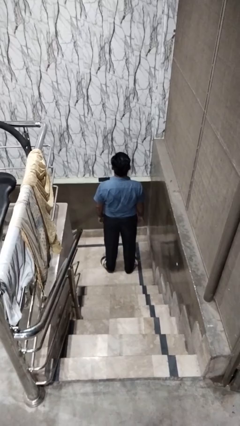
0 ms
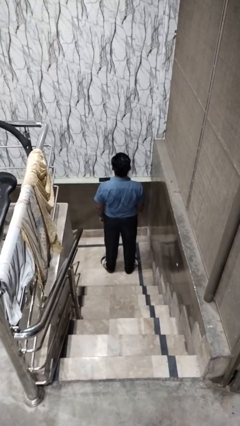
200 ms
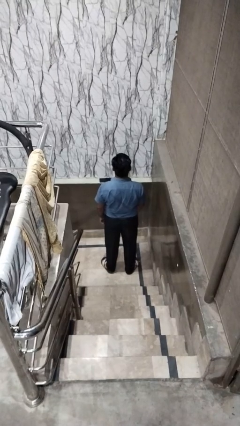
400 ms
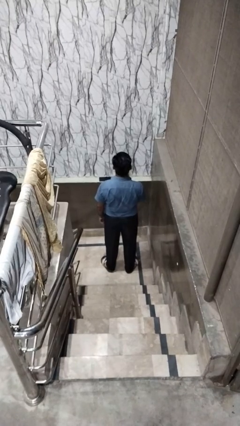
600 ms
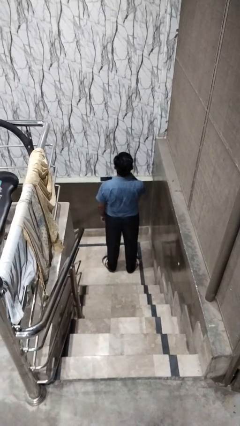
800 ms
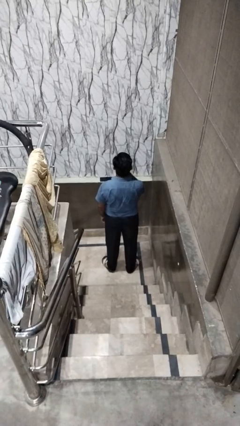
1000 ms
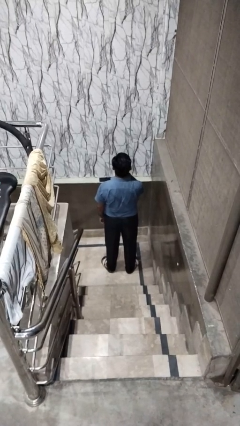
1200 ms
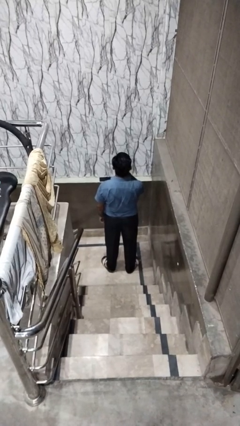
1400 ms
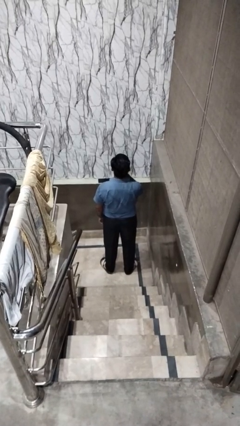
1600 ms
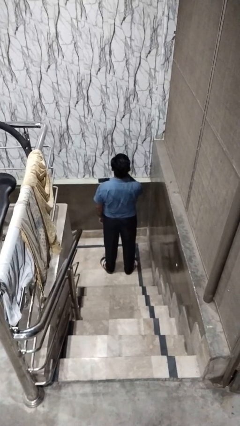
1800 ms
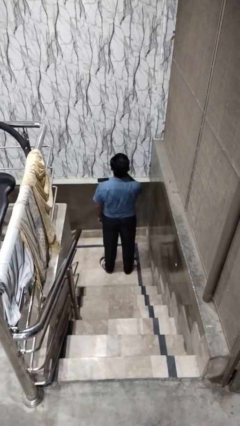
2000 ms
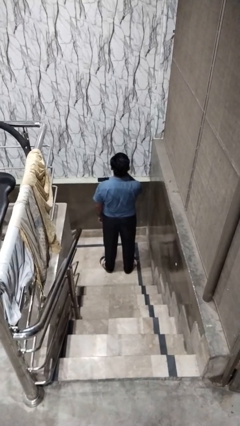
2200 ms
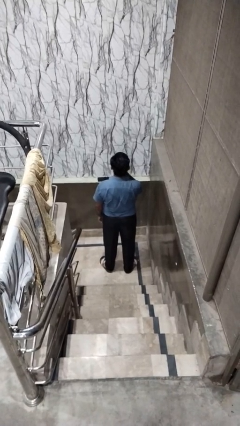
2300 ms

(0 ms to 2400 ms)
person gestures be quiet

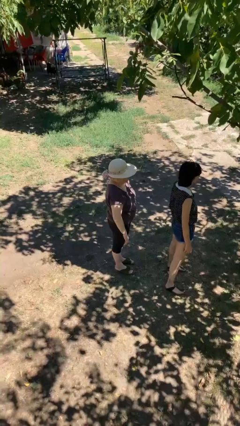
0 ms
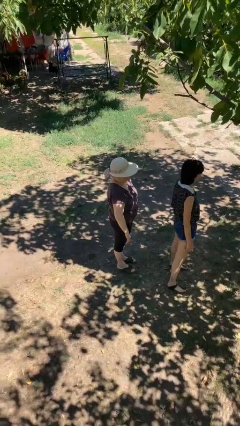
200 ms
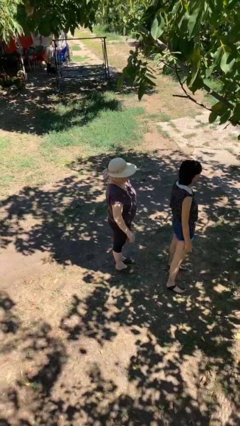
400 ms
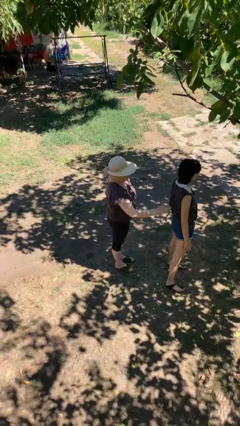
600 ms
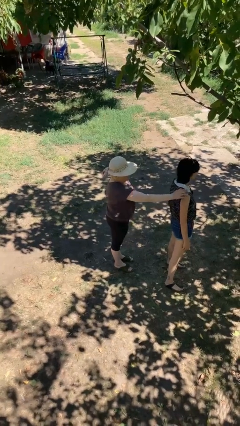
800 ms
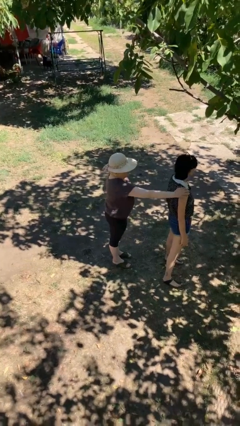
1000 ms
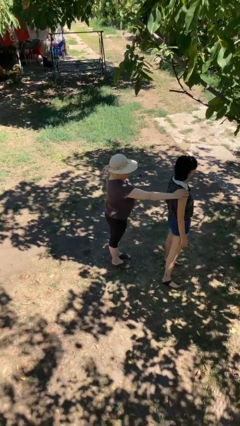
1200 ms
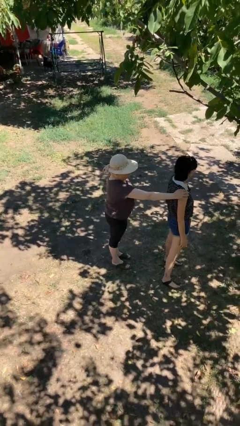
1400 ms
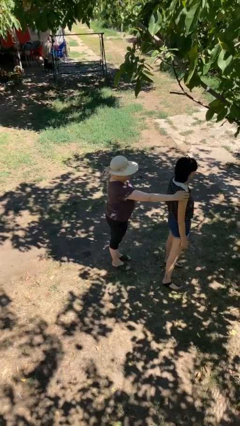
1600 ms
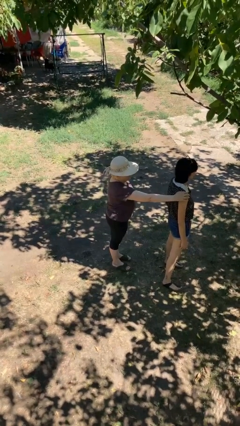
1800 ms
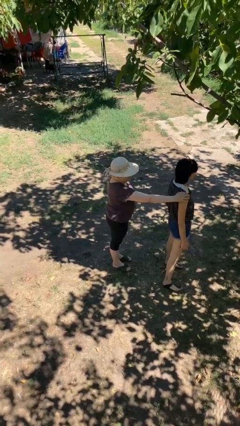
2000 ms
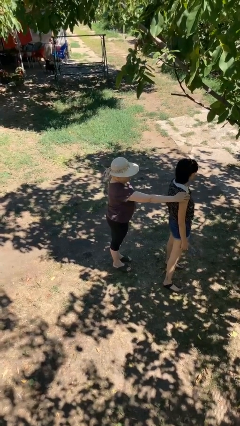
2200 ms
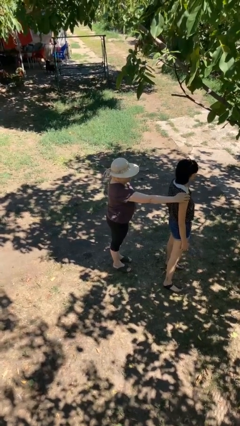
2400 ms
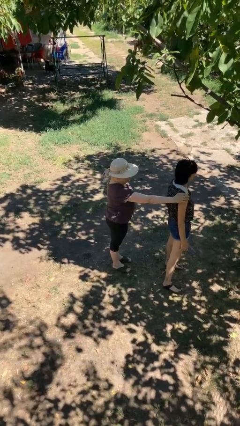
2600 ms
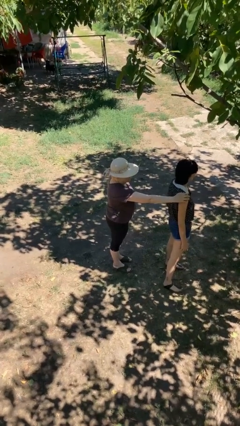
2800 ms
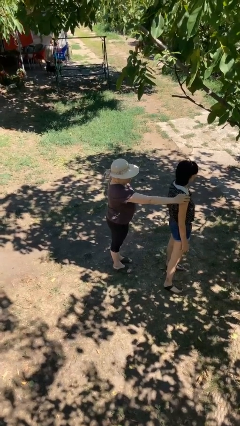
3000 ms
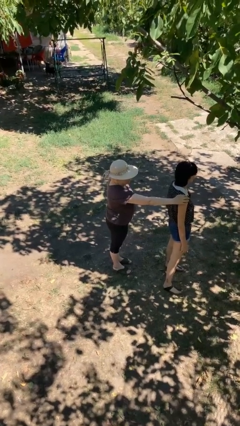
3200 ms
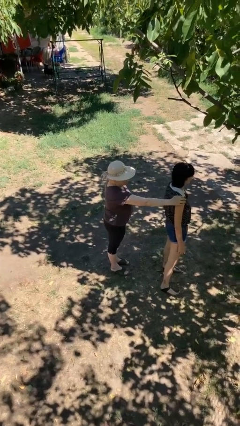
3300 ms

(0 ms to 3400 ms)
person grabs person by shoulder

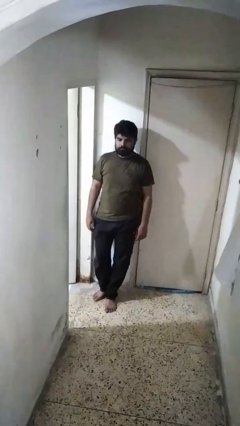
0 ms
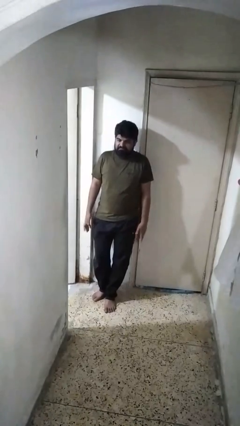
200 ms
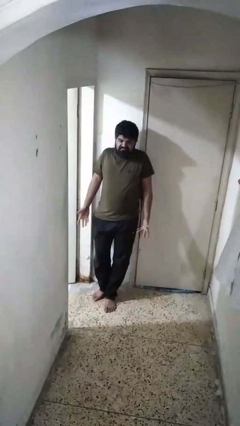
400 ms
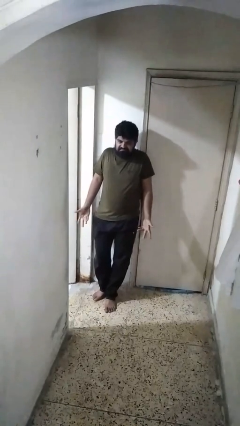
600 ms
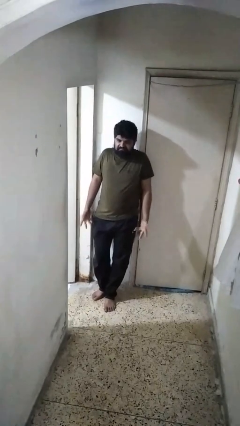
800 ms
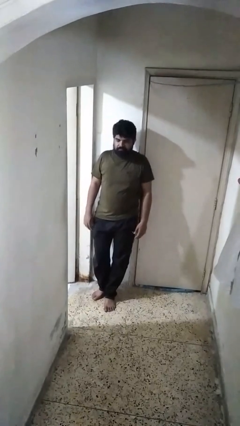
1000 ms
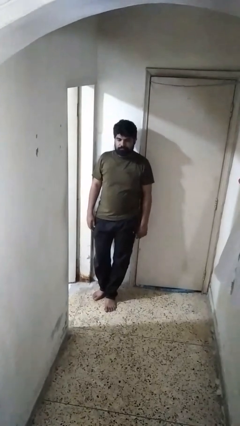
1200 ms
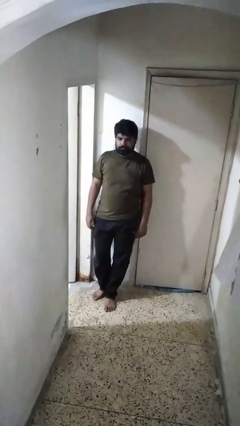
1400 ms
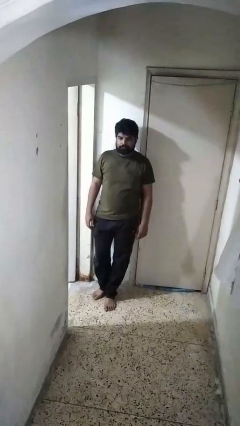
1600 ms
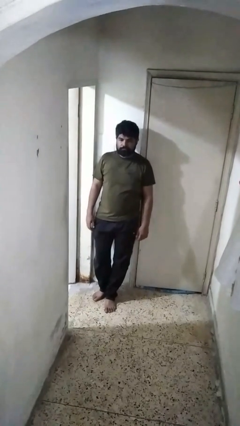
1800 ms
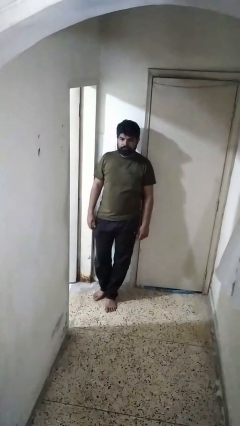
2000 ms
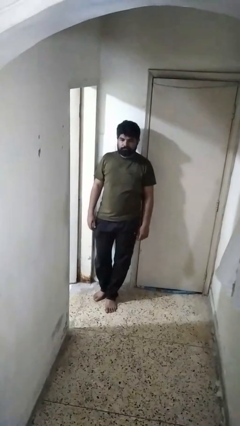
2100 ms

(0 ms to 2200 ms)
person shrugs

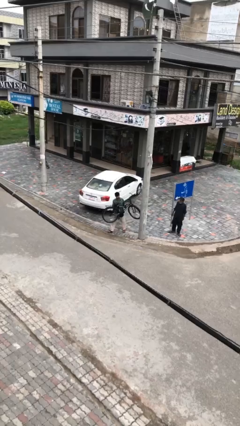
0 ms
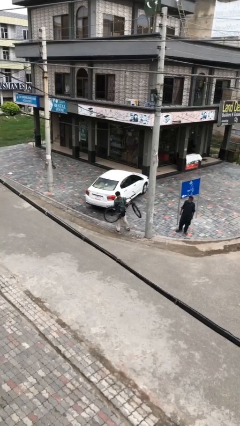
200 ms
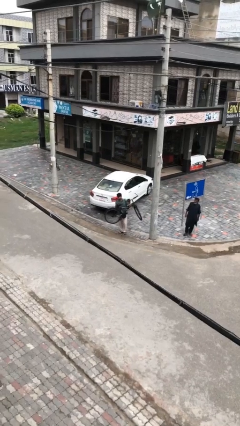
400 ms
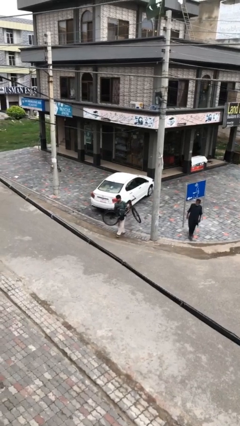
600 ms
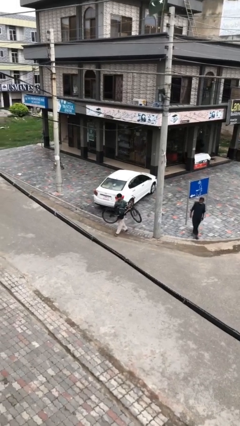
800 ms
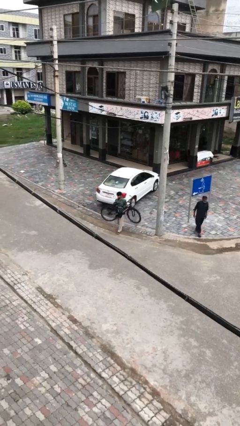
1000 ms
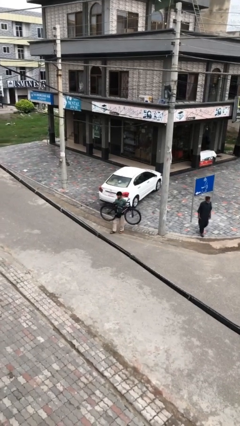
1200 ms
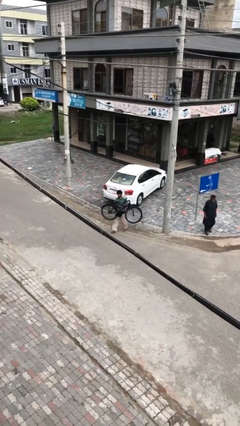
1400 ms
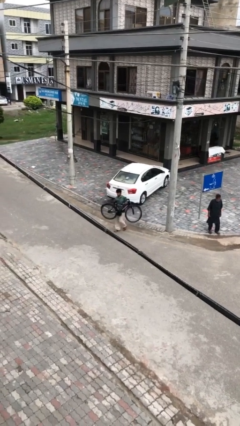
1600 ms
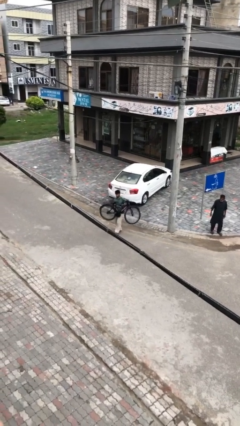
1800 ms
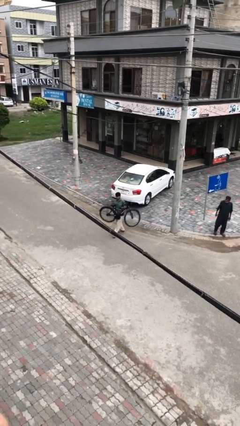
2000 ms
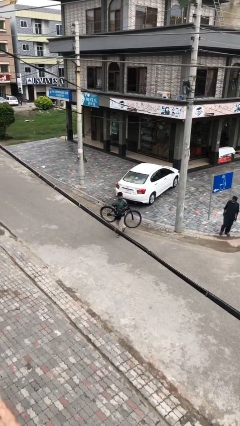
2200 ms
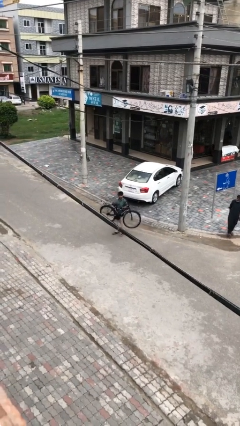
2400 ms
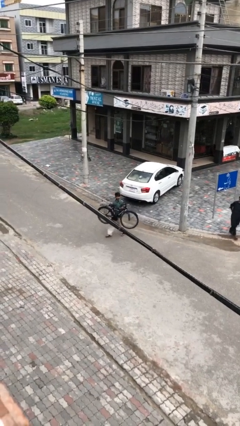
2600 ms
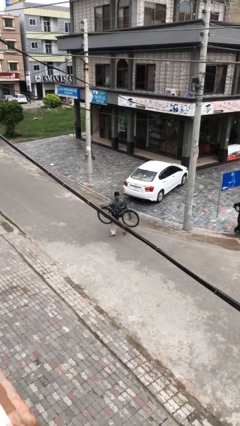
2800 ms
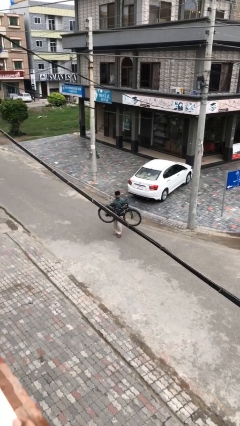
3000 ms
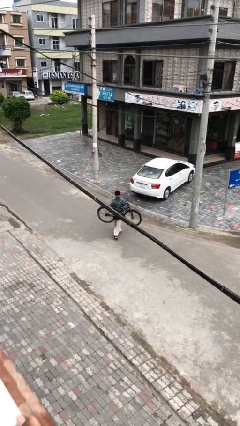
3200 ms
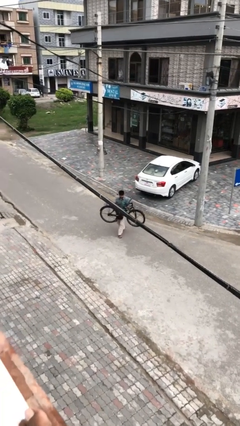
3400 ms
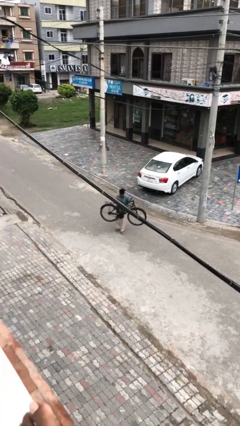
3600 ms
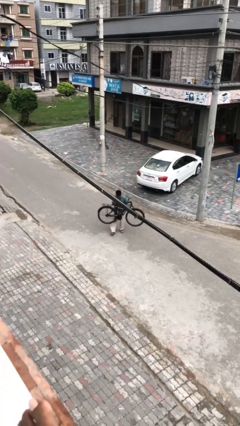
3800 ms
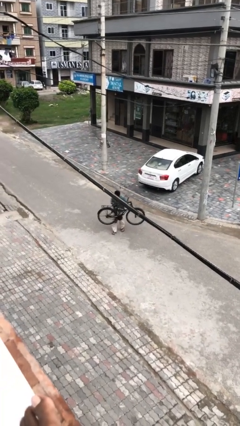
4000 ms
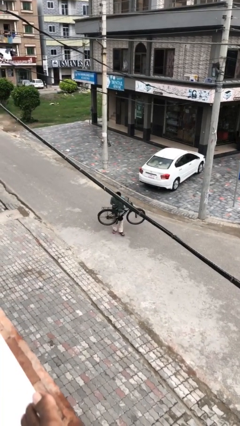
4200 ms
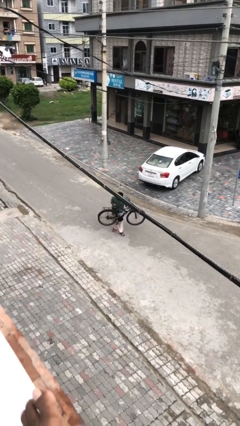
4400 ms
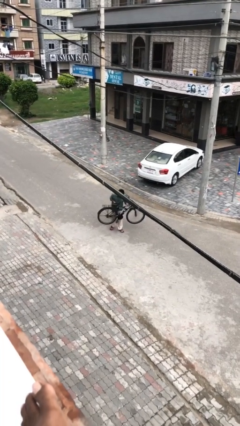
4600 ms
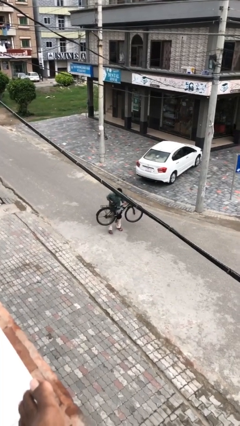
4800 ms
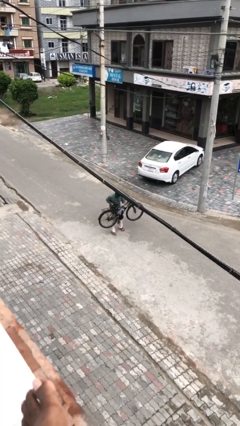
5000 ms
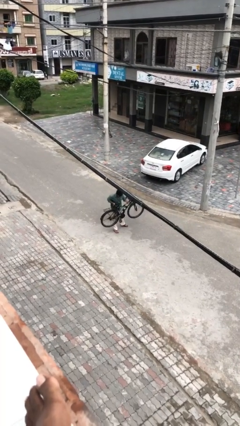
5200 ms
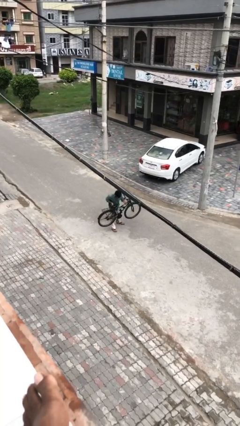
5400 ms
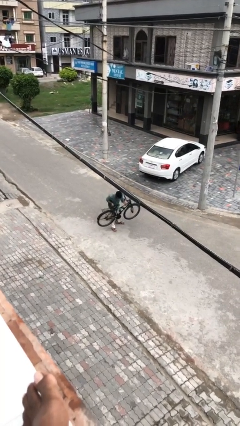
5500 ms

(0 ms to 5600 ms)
person carries heavy object

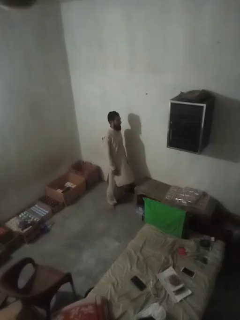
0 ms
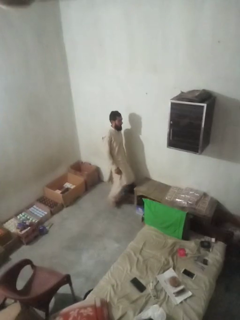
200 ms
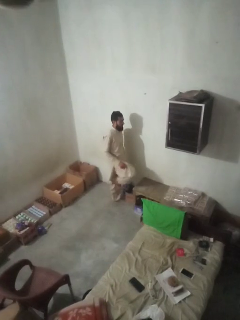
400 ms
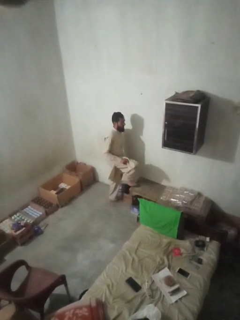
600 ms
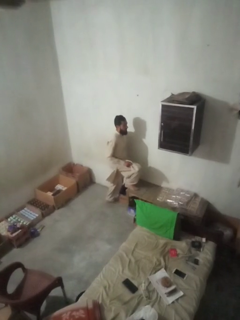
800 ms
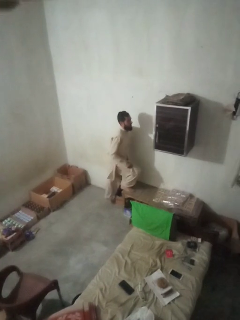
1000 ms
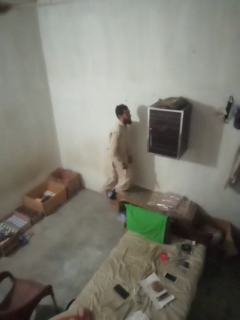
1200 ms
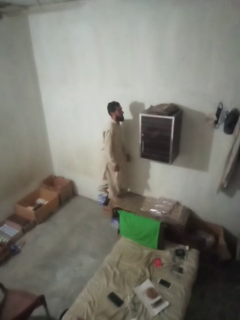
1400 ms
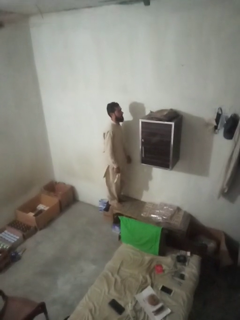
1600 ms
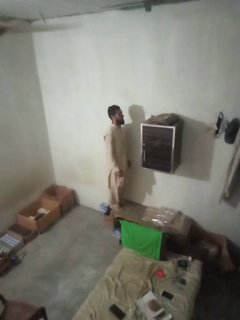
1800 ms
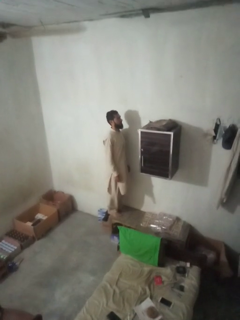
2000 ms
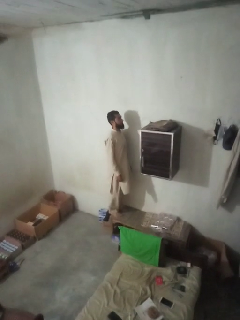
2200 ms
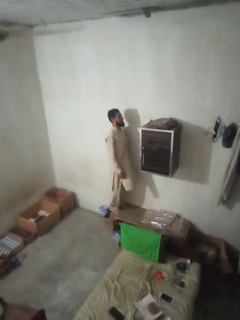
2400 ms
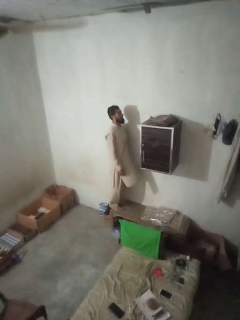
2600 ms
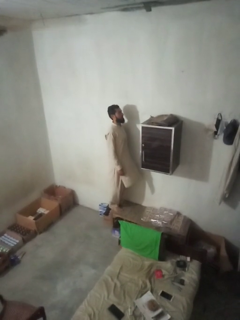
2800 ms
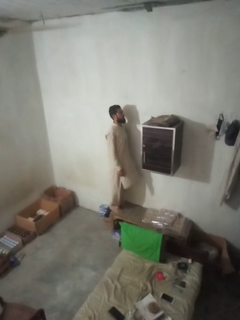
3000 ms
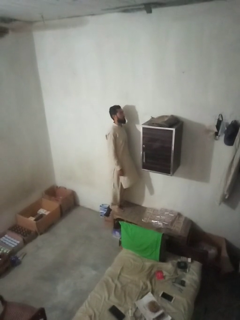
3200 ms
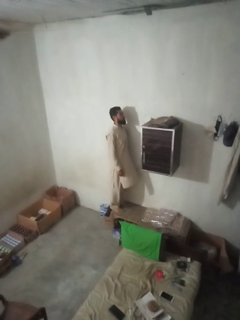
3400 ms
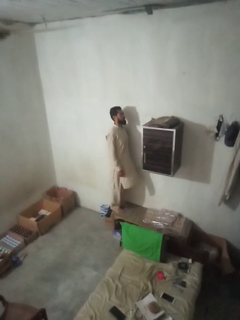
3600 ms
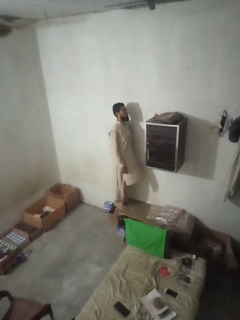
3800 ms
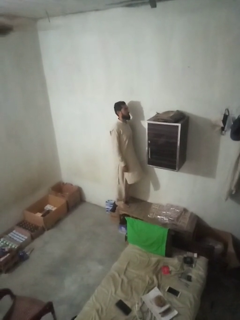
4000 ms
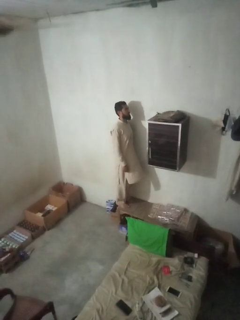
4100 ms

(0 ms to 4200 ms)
person climbs on table

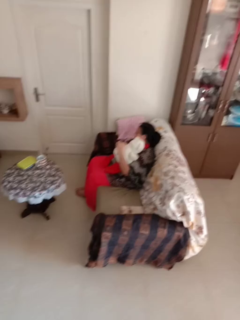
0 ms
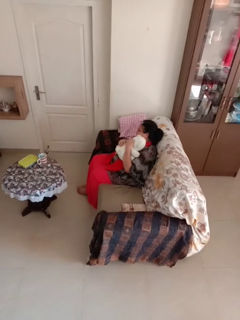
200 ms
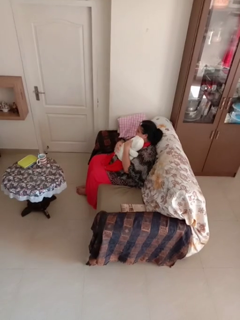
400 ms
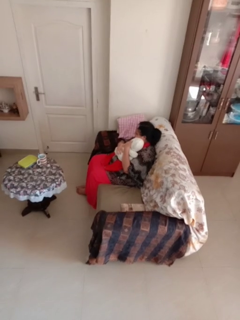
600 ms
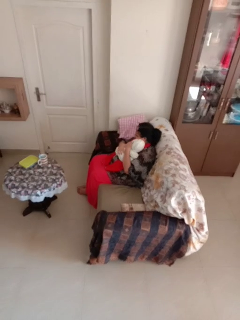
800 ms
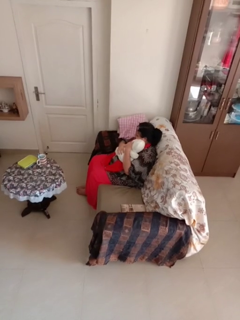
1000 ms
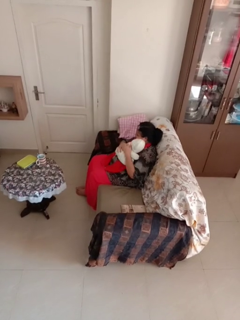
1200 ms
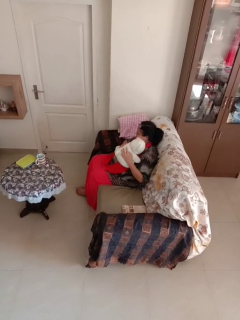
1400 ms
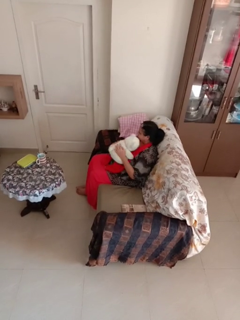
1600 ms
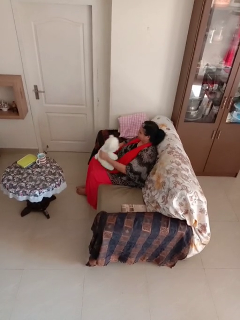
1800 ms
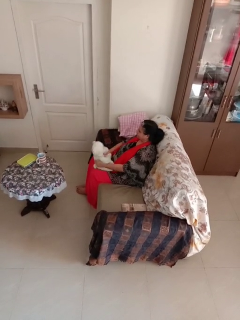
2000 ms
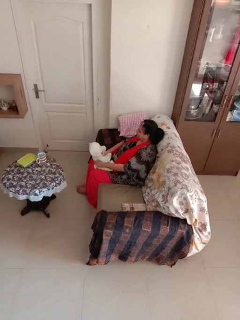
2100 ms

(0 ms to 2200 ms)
person hugs stuffed animal
